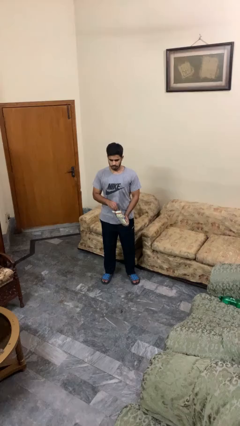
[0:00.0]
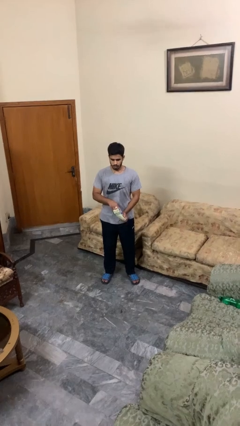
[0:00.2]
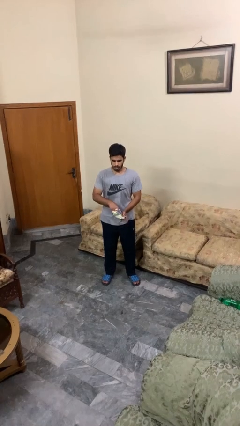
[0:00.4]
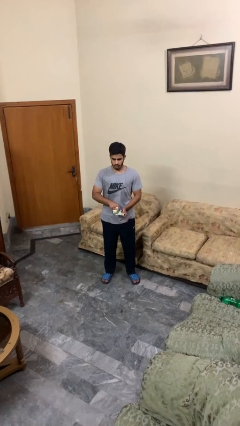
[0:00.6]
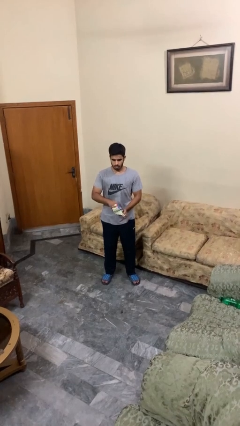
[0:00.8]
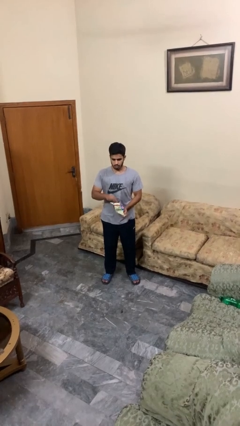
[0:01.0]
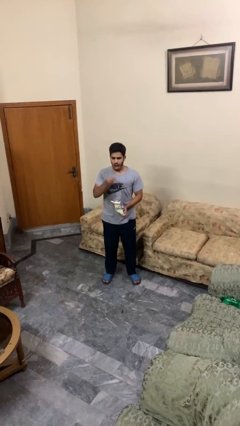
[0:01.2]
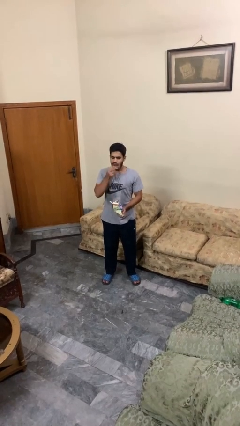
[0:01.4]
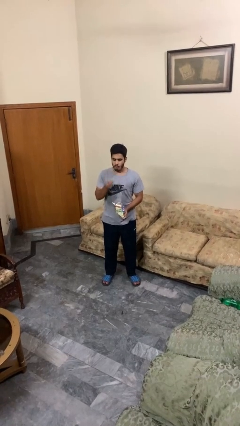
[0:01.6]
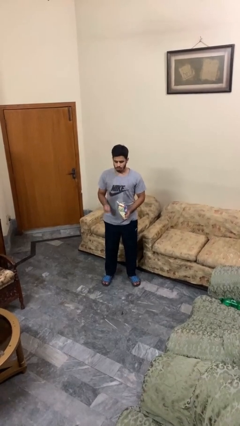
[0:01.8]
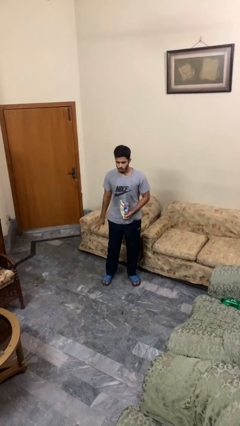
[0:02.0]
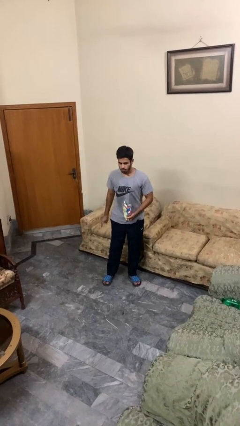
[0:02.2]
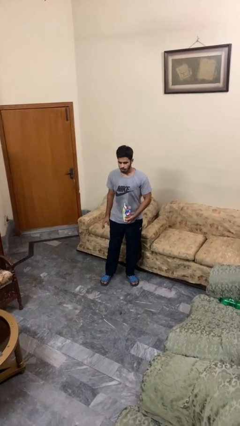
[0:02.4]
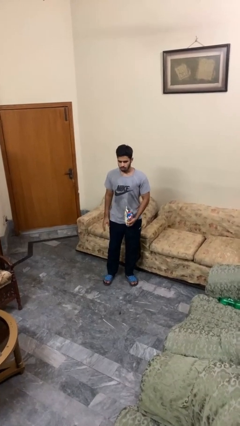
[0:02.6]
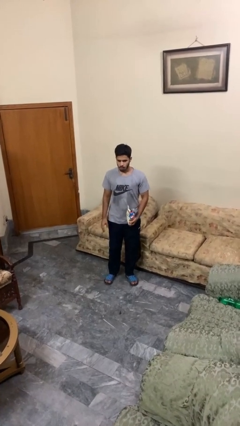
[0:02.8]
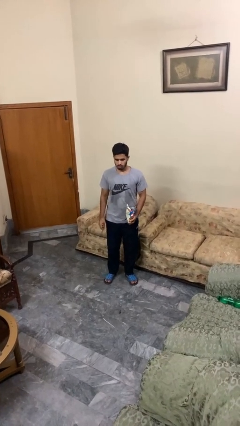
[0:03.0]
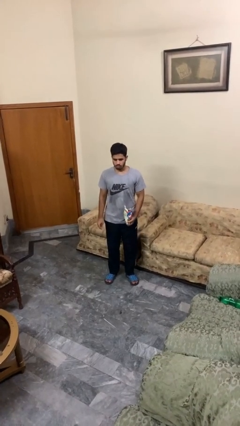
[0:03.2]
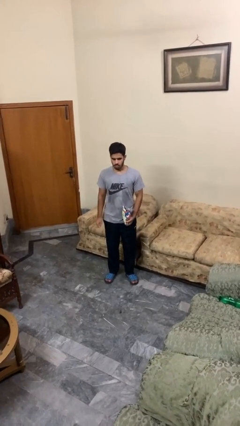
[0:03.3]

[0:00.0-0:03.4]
person eats snack from bag

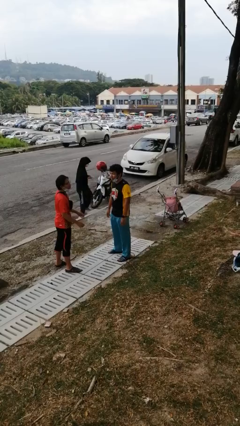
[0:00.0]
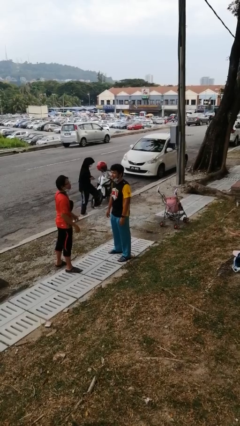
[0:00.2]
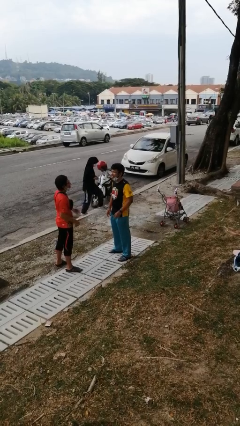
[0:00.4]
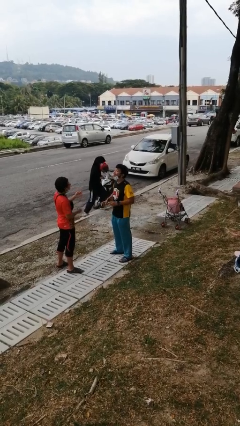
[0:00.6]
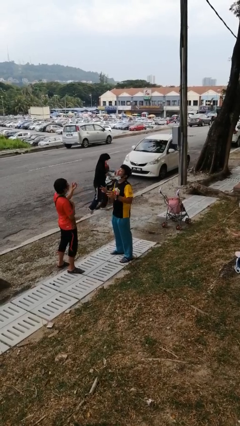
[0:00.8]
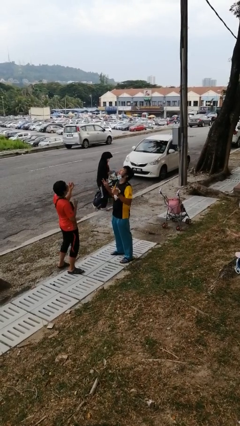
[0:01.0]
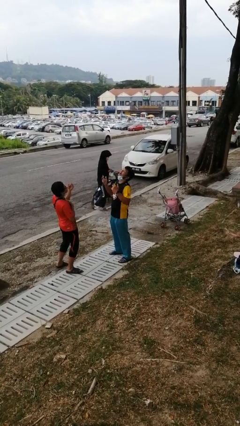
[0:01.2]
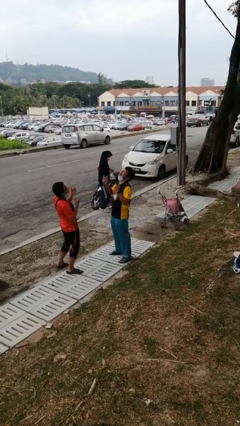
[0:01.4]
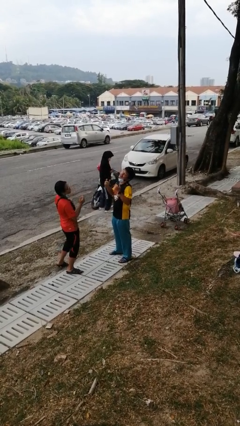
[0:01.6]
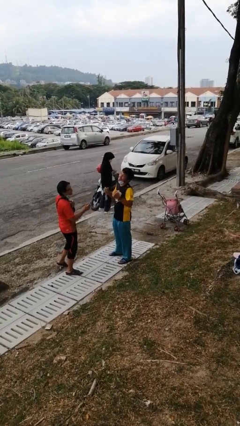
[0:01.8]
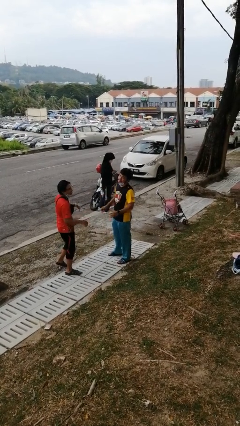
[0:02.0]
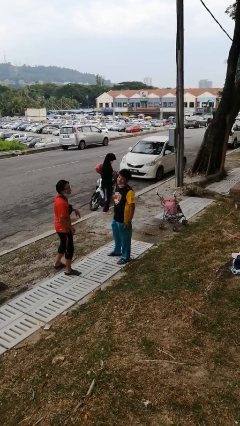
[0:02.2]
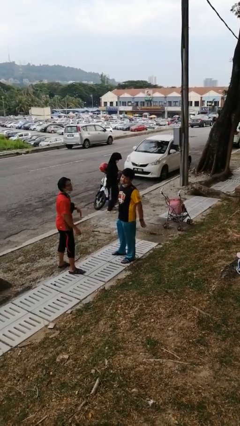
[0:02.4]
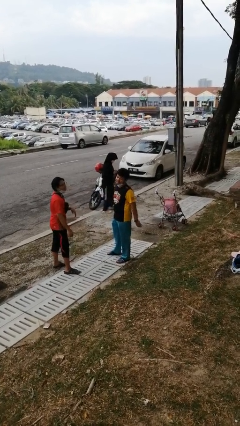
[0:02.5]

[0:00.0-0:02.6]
person laughs with person

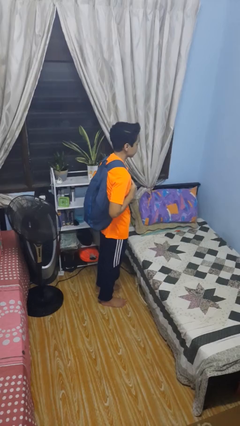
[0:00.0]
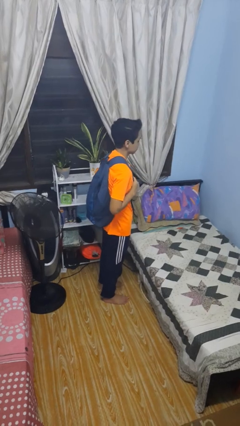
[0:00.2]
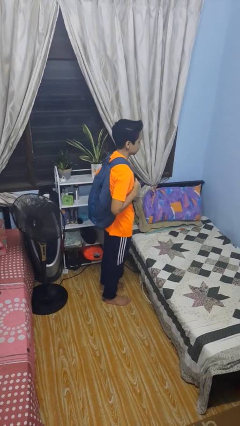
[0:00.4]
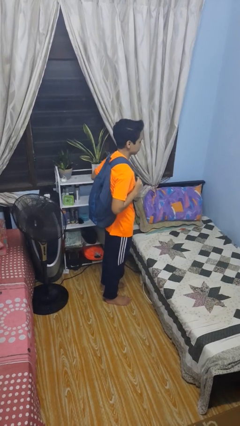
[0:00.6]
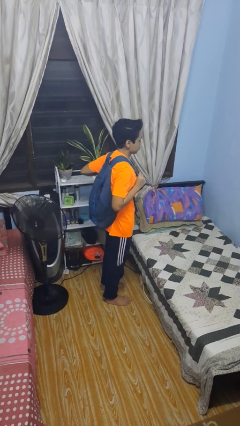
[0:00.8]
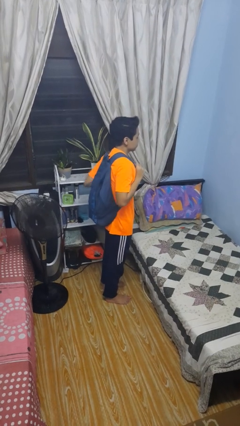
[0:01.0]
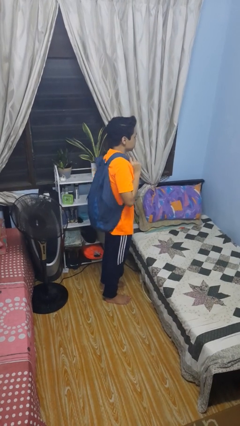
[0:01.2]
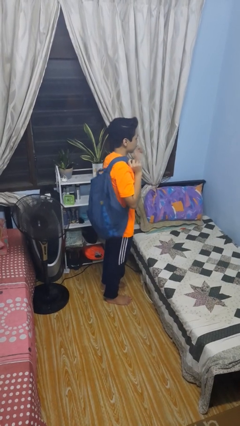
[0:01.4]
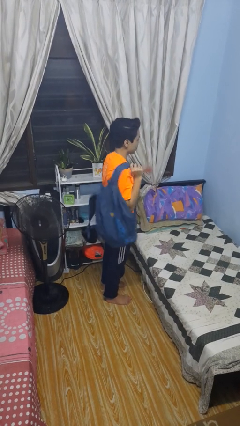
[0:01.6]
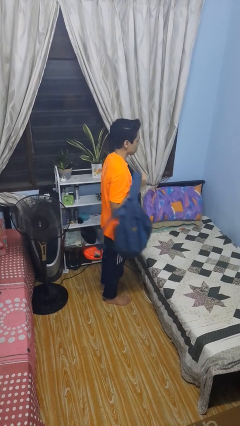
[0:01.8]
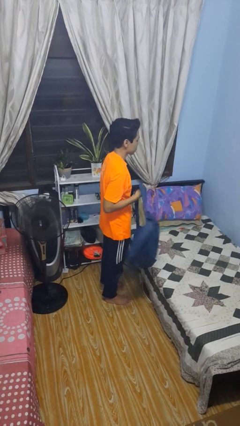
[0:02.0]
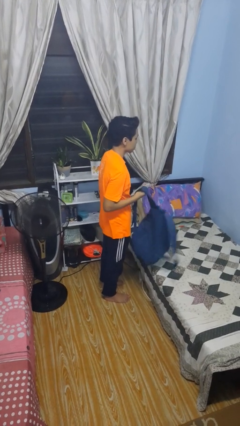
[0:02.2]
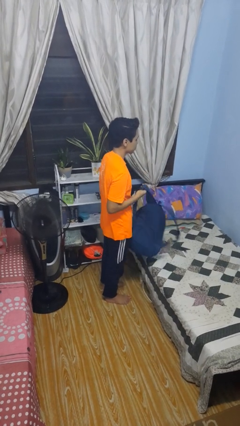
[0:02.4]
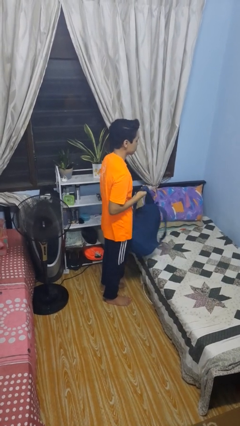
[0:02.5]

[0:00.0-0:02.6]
person takes off backpack

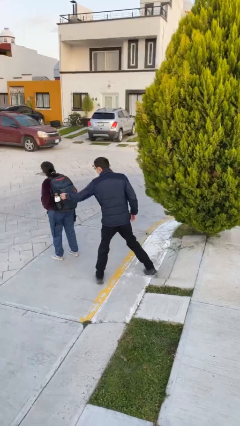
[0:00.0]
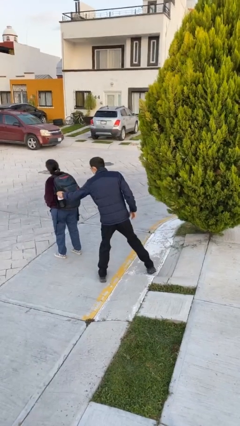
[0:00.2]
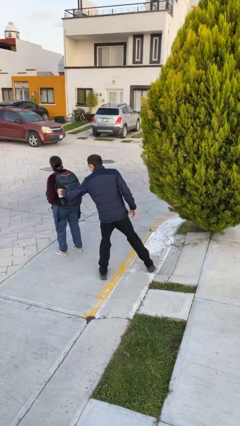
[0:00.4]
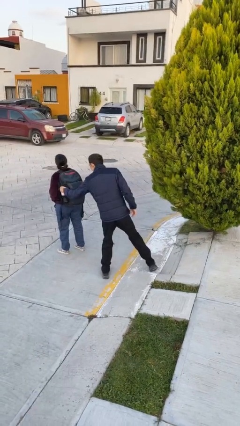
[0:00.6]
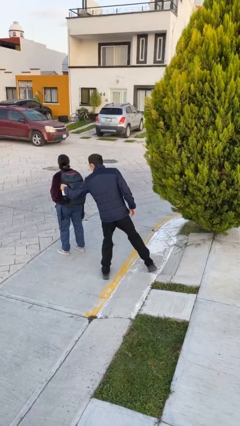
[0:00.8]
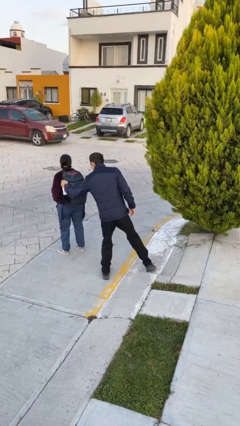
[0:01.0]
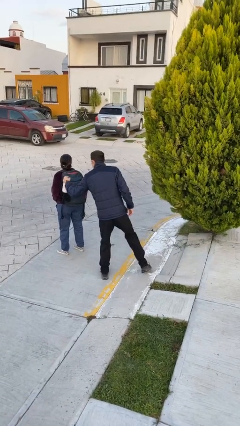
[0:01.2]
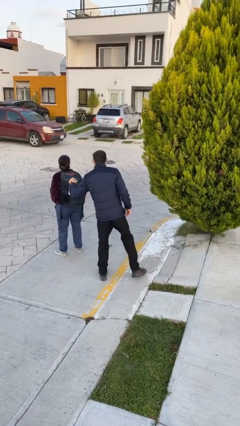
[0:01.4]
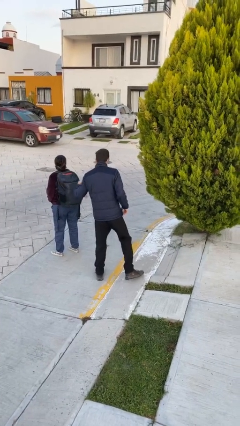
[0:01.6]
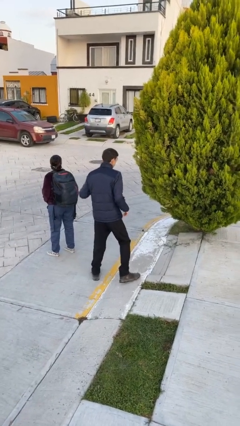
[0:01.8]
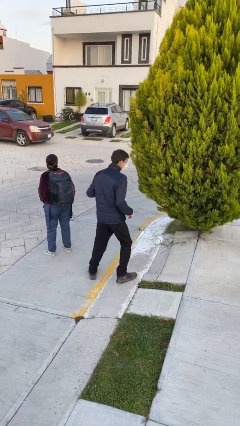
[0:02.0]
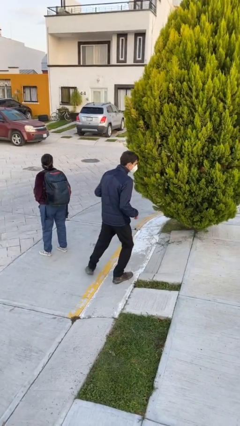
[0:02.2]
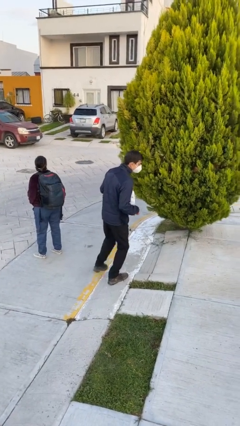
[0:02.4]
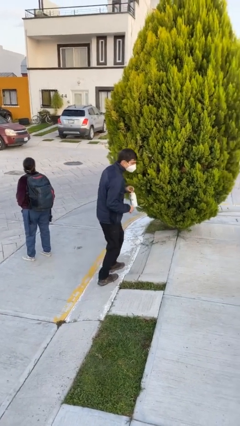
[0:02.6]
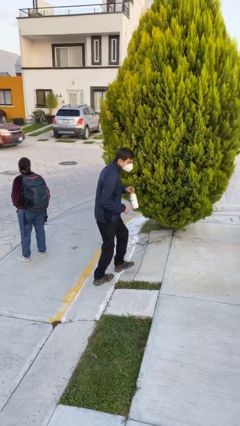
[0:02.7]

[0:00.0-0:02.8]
person steals object from person

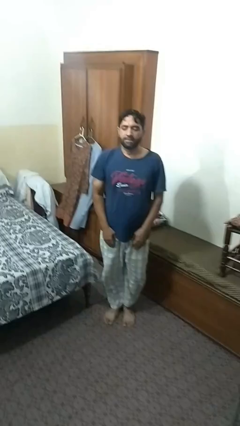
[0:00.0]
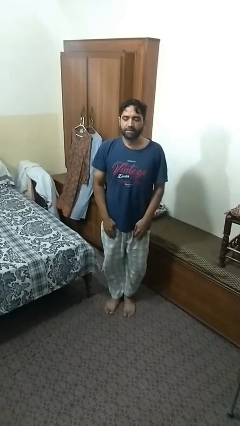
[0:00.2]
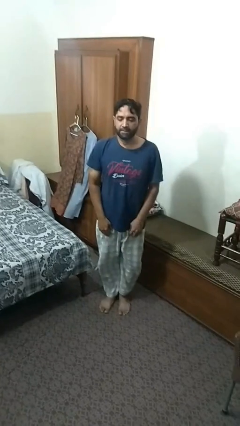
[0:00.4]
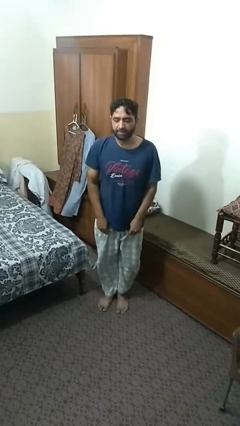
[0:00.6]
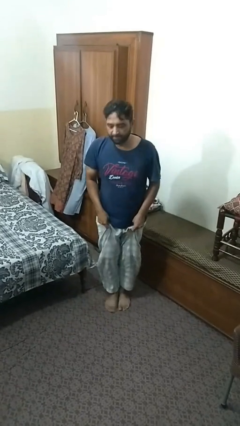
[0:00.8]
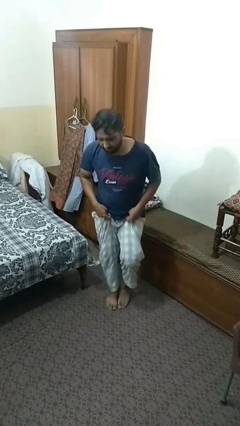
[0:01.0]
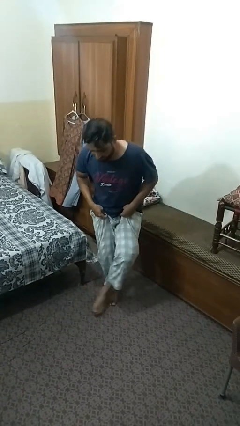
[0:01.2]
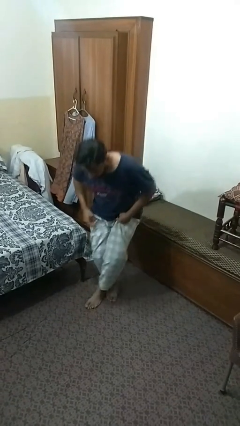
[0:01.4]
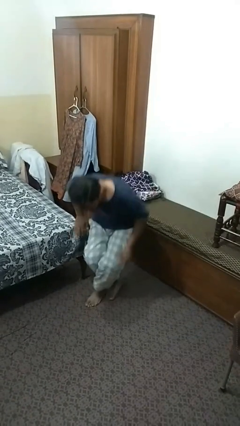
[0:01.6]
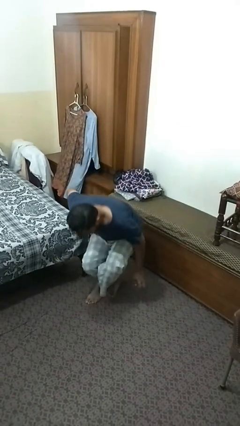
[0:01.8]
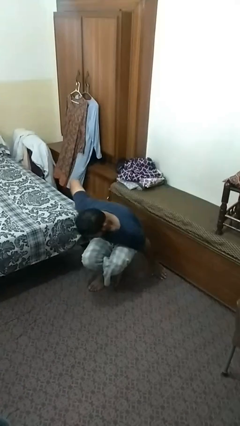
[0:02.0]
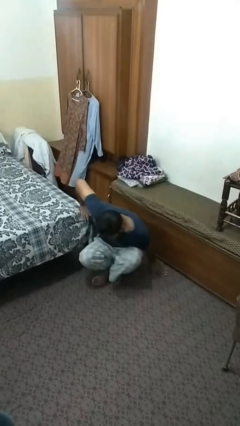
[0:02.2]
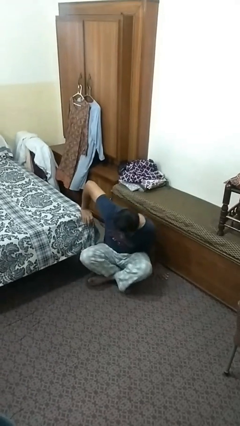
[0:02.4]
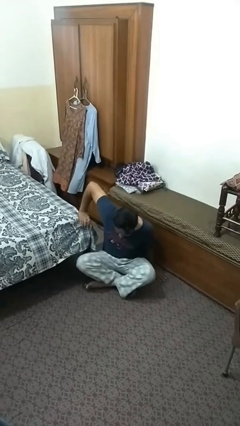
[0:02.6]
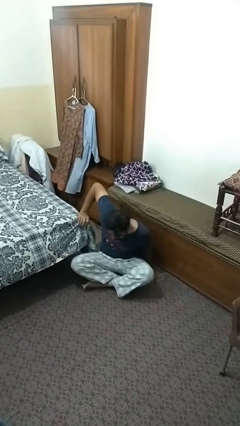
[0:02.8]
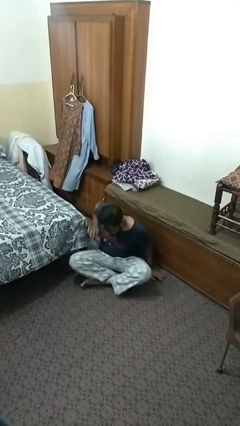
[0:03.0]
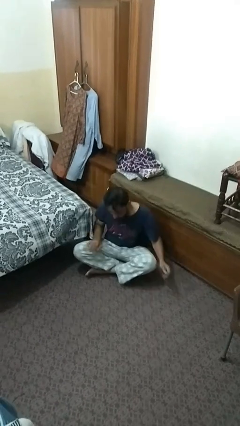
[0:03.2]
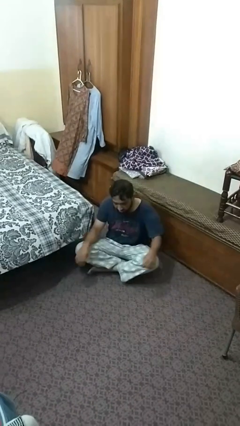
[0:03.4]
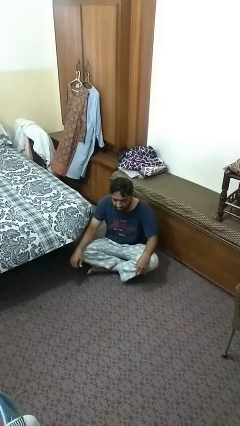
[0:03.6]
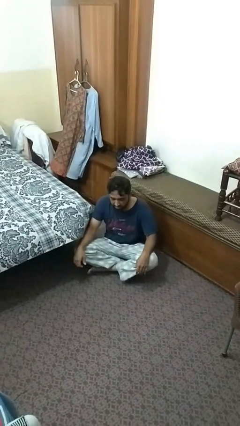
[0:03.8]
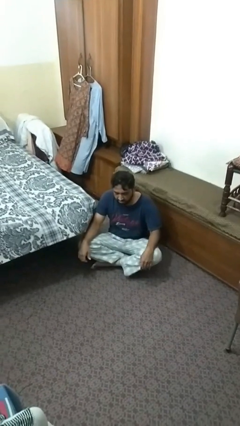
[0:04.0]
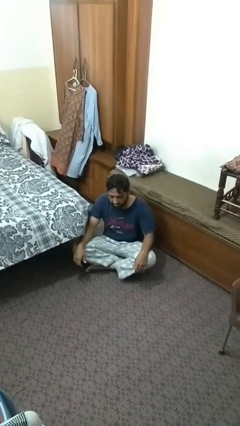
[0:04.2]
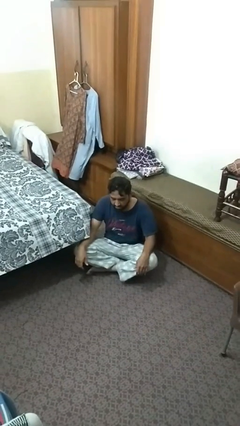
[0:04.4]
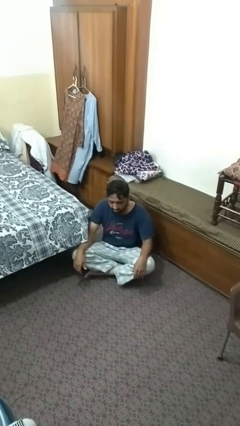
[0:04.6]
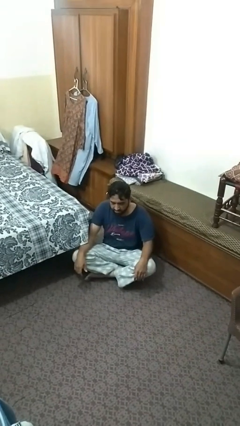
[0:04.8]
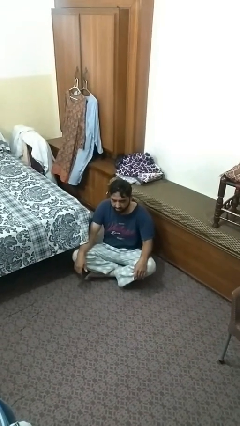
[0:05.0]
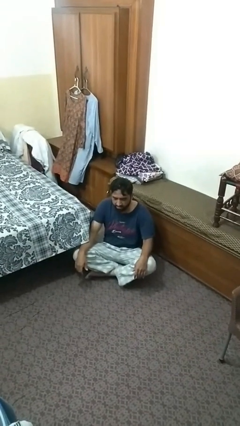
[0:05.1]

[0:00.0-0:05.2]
person sits crisscross

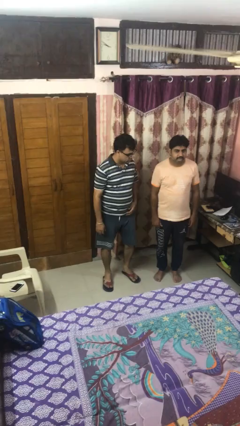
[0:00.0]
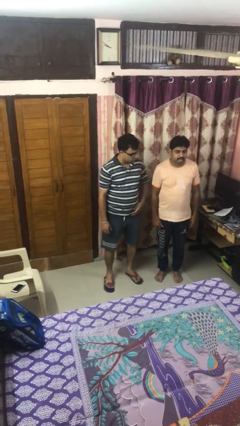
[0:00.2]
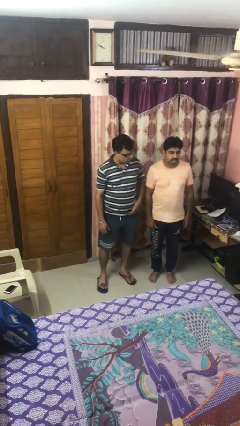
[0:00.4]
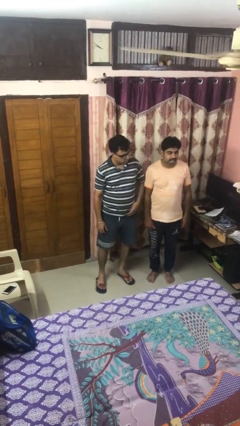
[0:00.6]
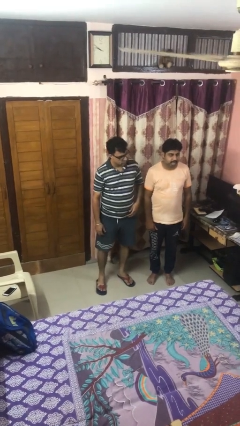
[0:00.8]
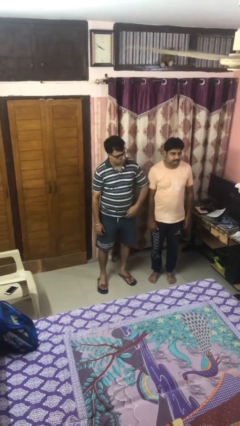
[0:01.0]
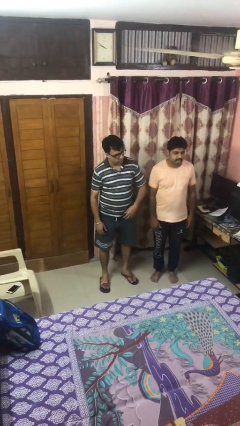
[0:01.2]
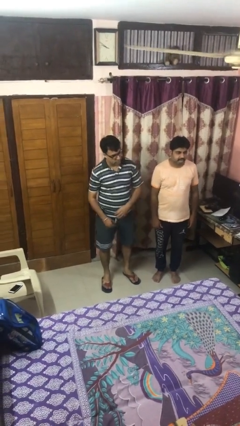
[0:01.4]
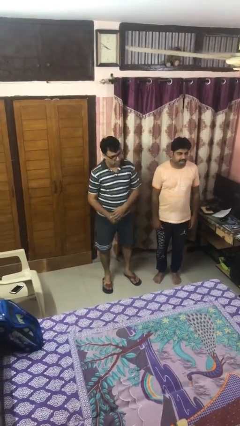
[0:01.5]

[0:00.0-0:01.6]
person nudges person with elbow
